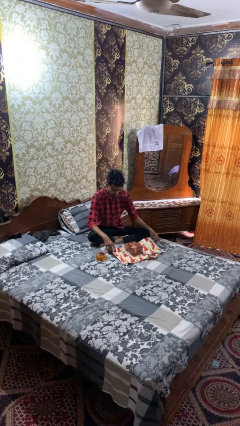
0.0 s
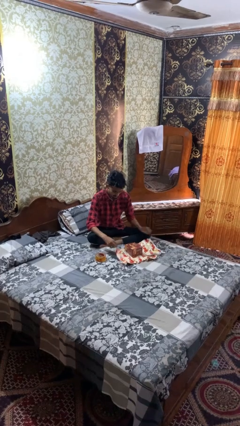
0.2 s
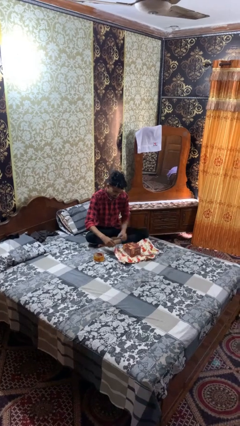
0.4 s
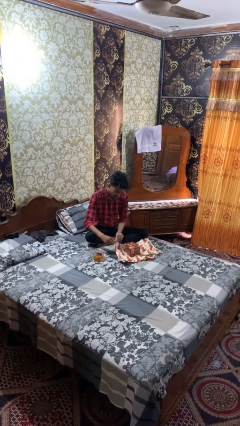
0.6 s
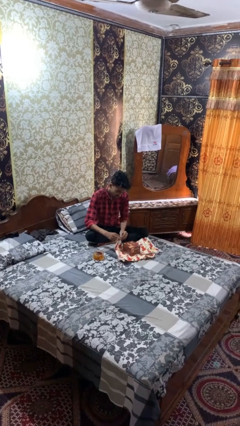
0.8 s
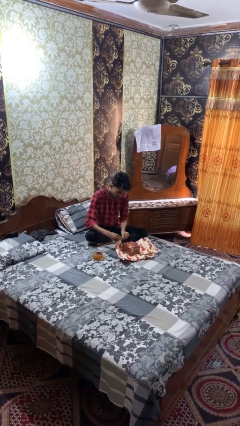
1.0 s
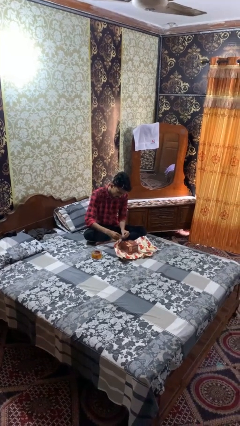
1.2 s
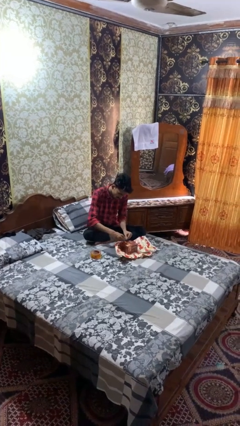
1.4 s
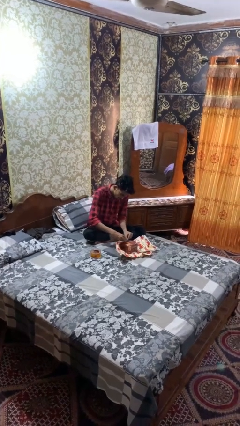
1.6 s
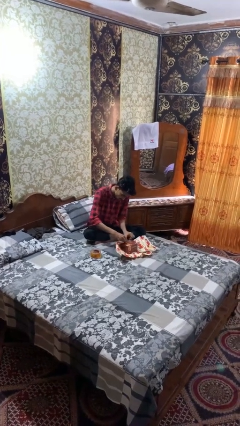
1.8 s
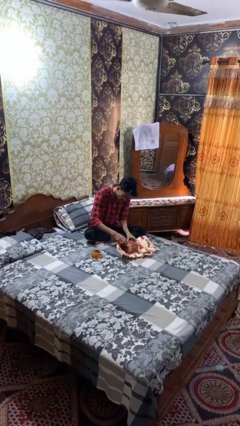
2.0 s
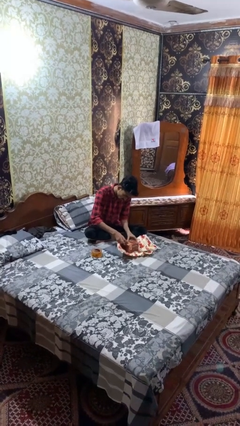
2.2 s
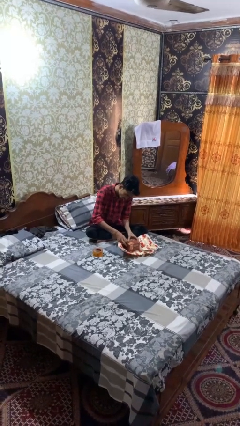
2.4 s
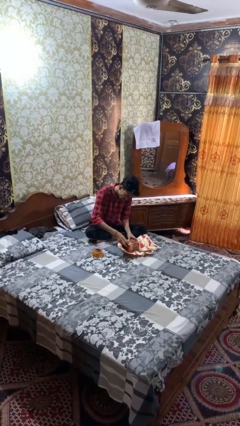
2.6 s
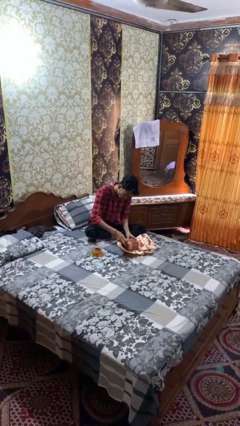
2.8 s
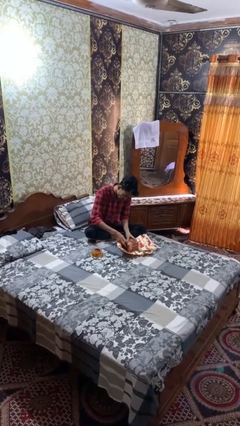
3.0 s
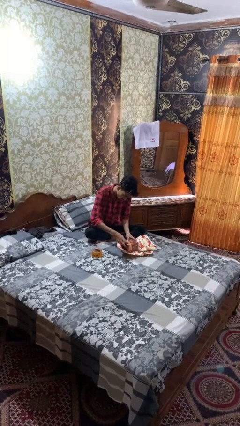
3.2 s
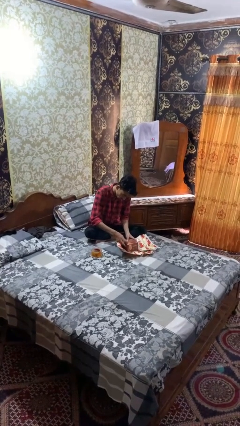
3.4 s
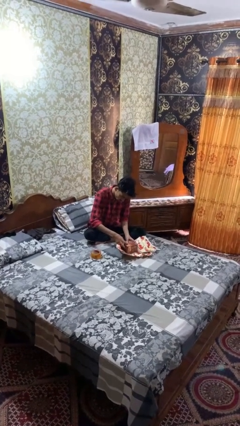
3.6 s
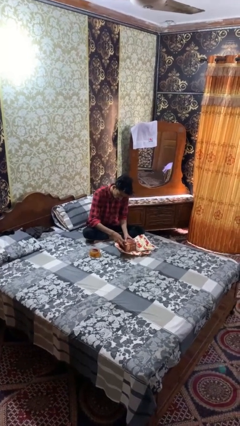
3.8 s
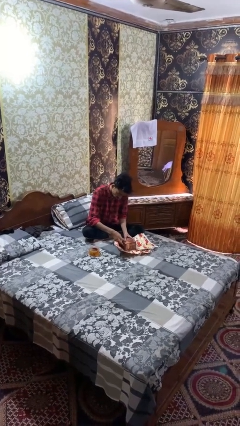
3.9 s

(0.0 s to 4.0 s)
person wraps box

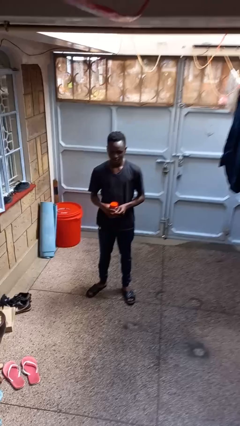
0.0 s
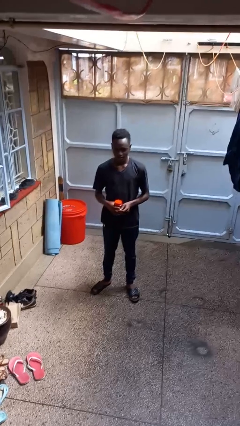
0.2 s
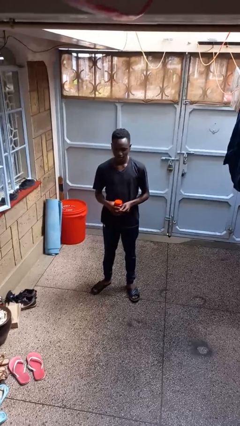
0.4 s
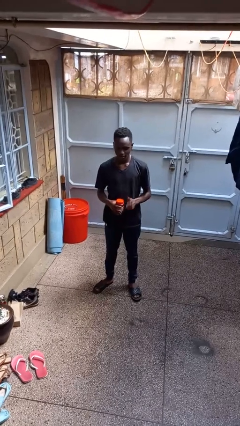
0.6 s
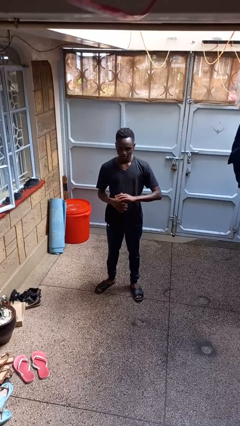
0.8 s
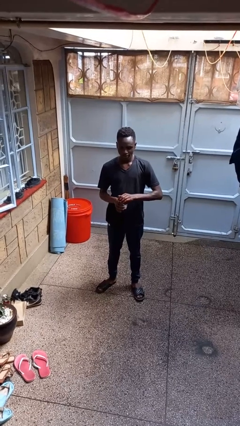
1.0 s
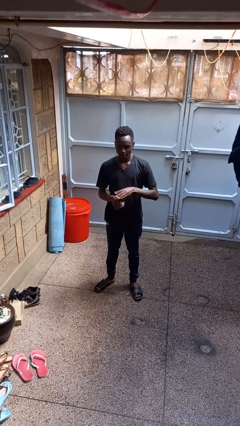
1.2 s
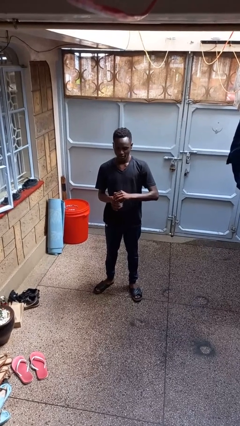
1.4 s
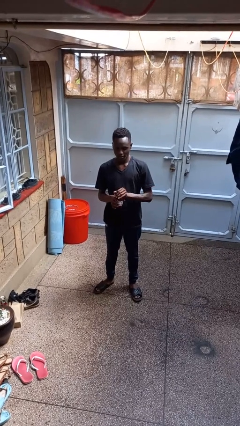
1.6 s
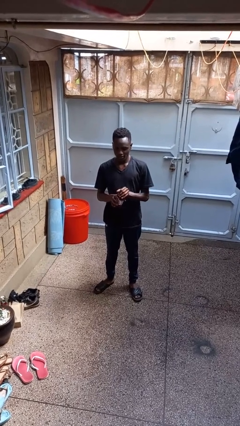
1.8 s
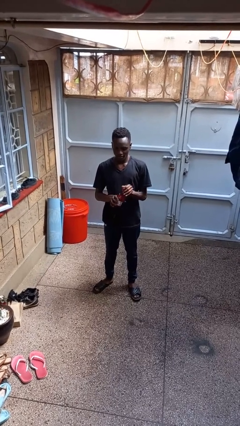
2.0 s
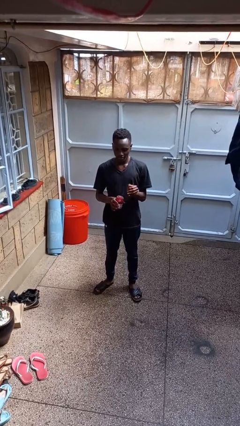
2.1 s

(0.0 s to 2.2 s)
person opens jar

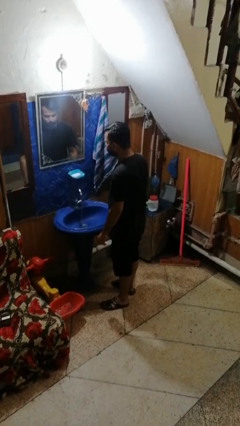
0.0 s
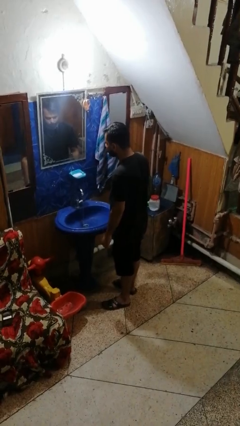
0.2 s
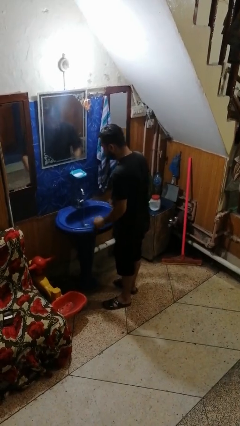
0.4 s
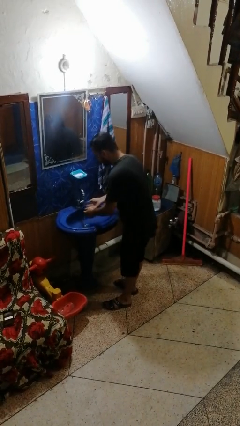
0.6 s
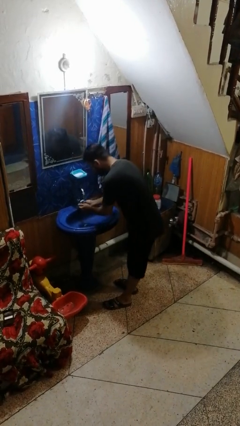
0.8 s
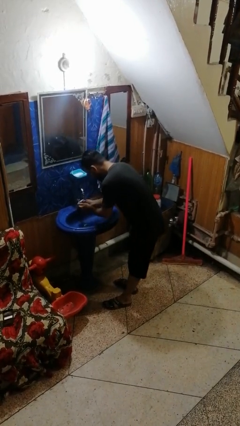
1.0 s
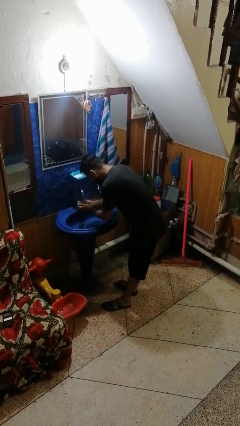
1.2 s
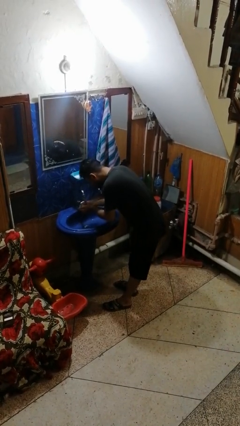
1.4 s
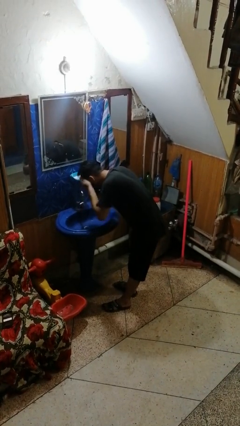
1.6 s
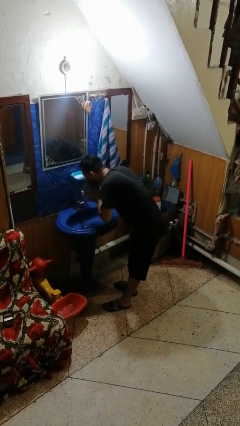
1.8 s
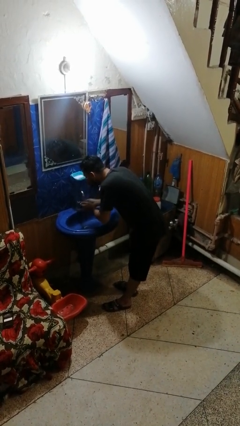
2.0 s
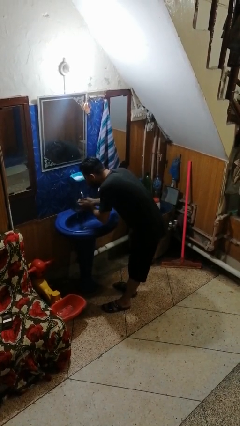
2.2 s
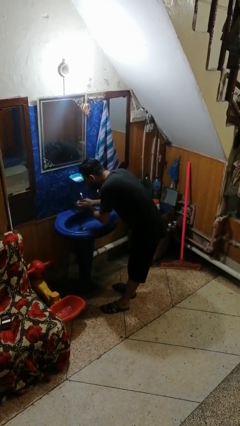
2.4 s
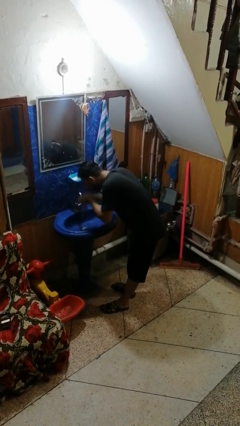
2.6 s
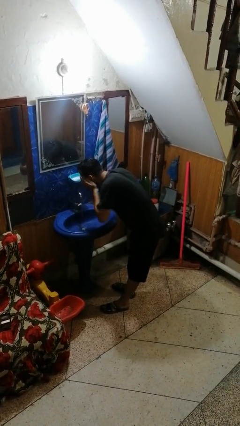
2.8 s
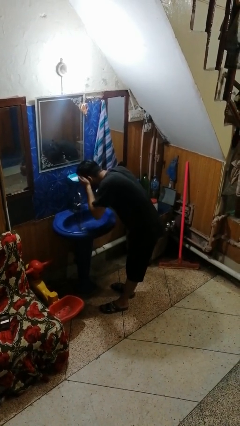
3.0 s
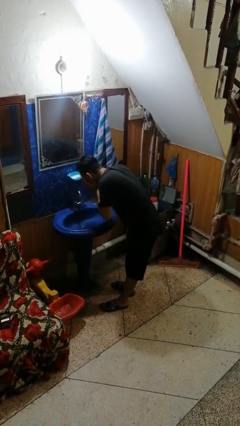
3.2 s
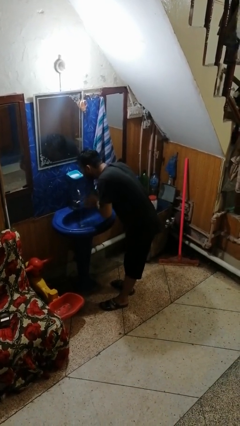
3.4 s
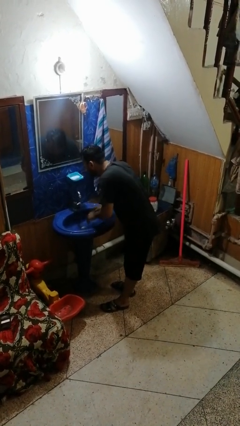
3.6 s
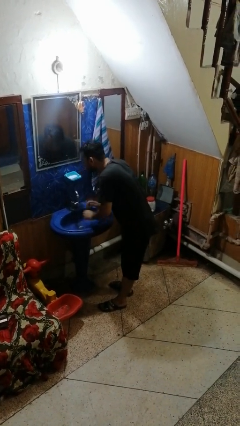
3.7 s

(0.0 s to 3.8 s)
person washes face

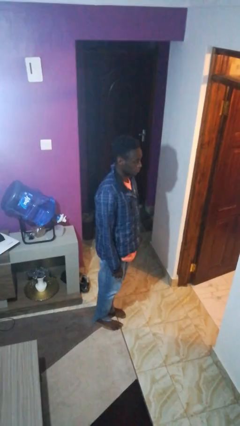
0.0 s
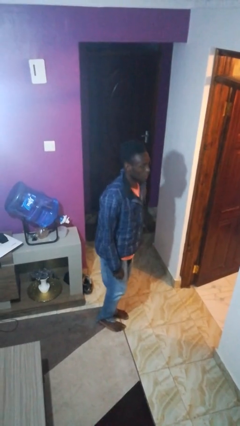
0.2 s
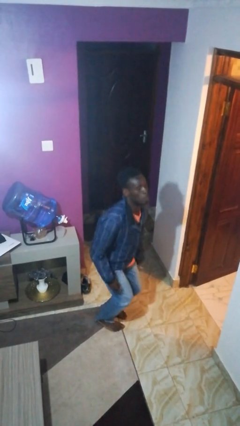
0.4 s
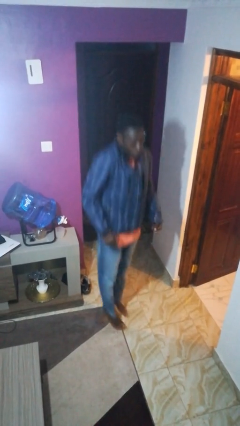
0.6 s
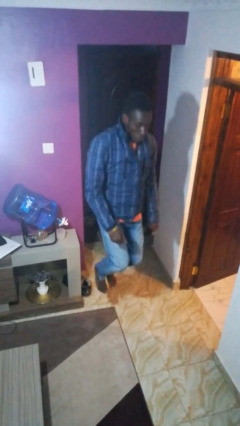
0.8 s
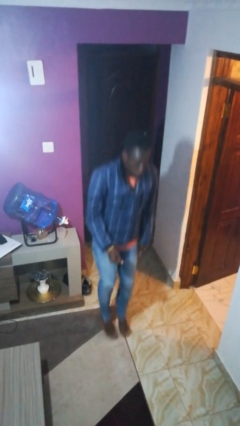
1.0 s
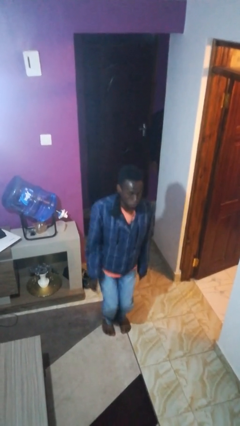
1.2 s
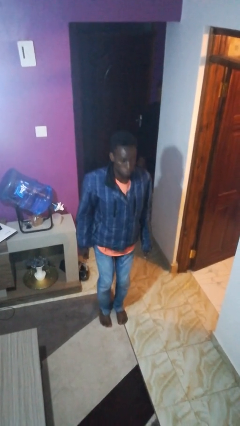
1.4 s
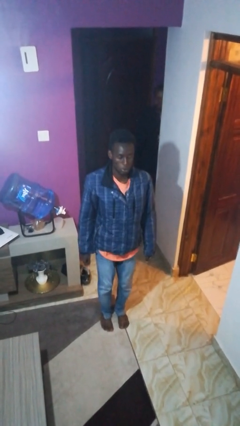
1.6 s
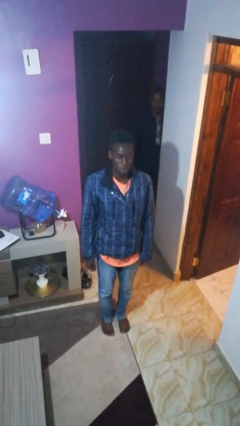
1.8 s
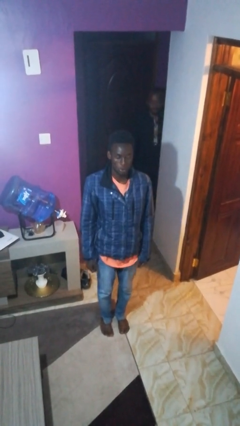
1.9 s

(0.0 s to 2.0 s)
person jumps

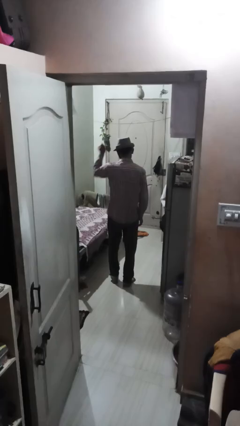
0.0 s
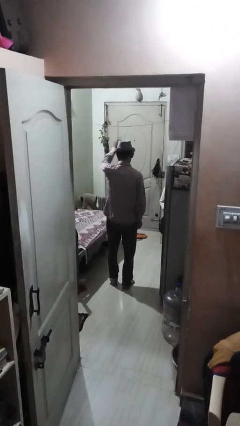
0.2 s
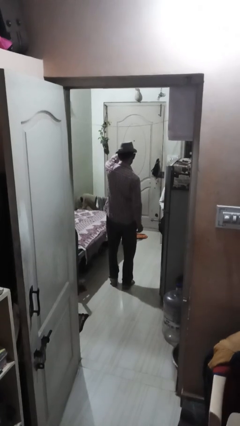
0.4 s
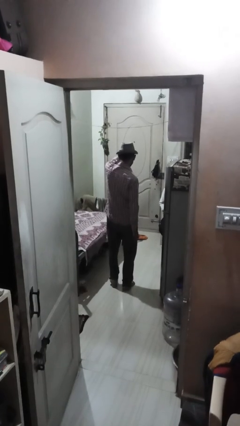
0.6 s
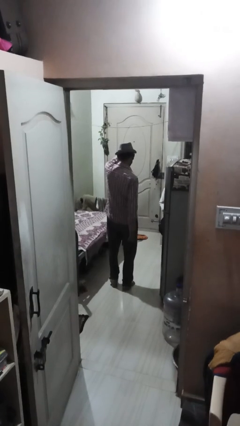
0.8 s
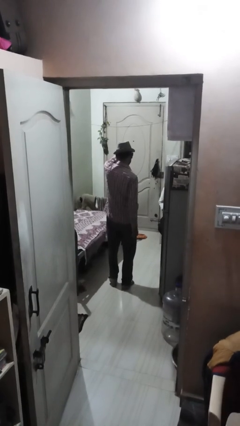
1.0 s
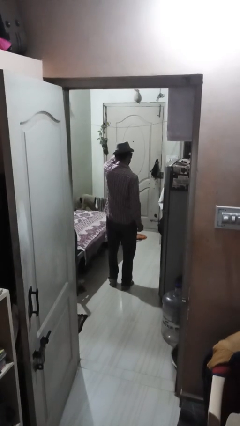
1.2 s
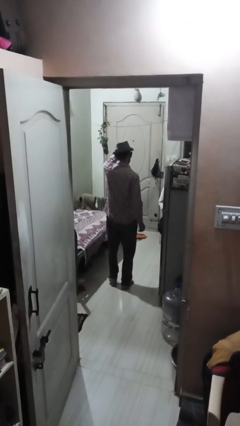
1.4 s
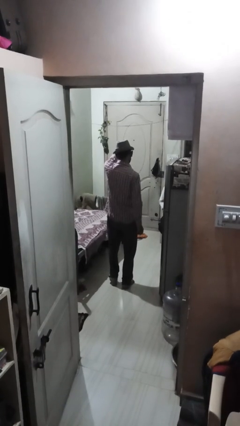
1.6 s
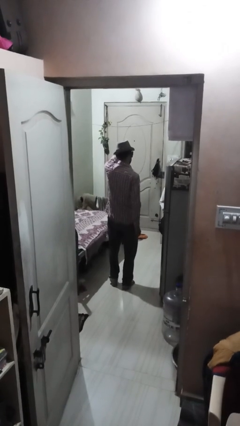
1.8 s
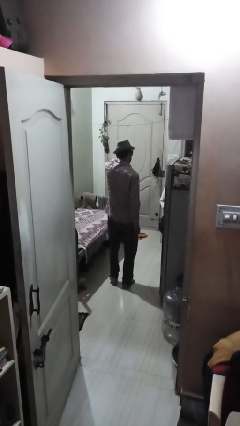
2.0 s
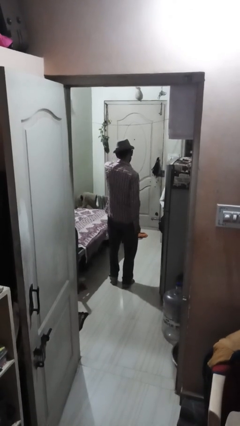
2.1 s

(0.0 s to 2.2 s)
person points at person

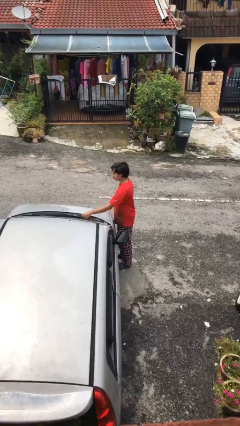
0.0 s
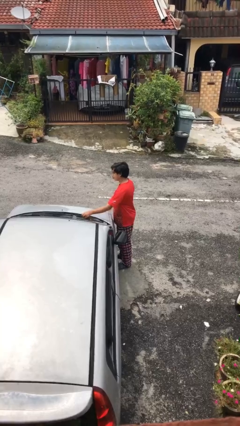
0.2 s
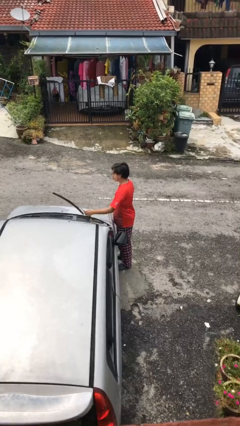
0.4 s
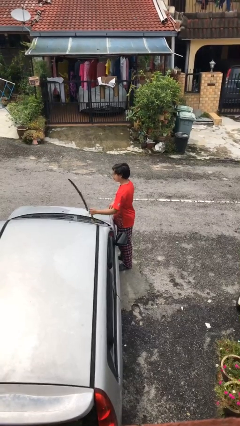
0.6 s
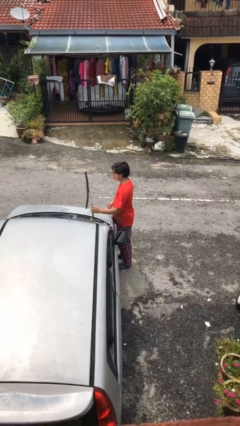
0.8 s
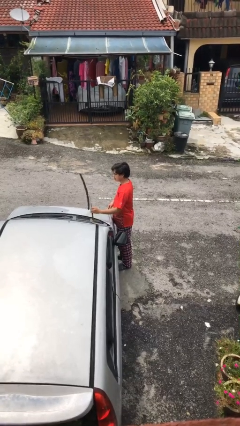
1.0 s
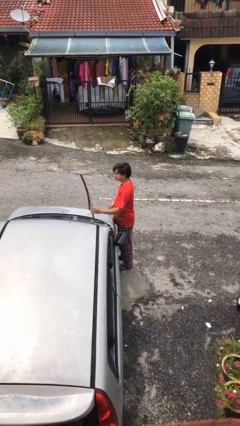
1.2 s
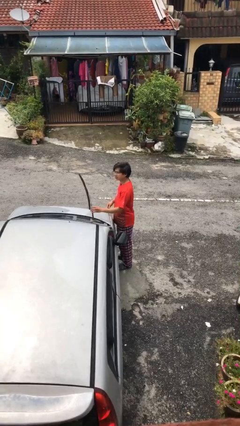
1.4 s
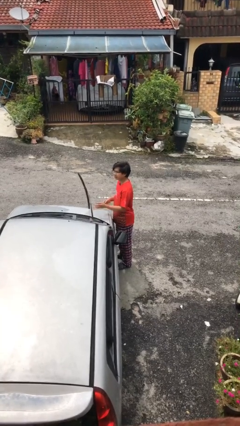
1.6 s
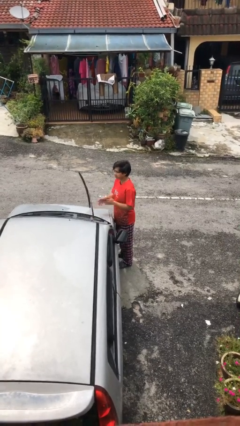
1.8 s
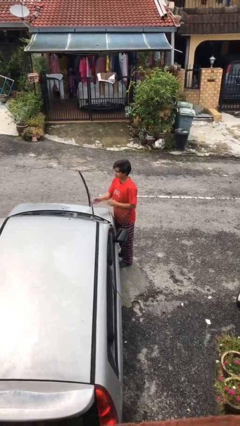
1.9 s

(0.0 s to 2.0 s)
person flips up car wipers

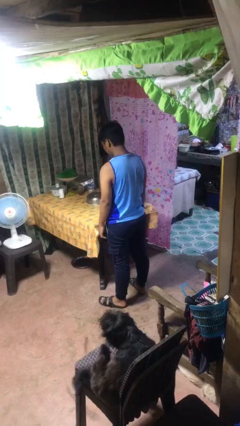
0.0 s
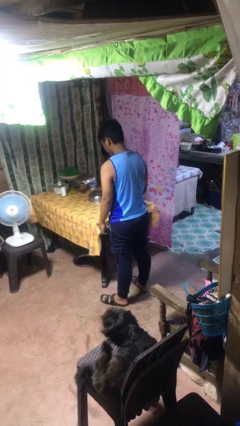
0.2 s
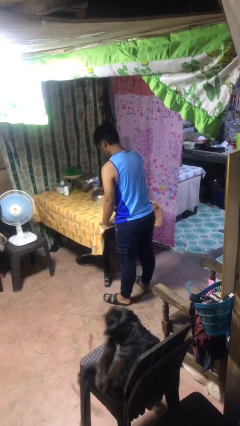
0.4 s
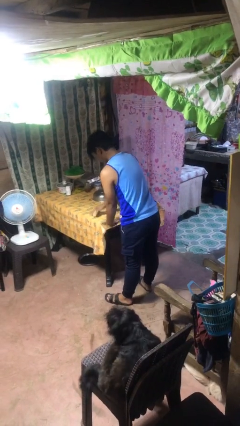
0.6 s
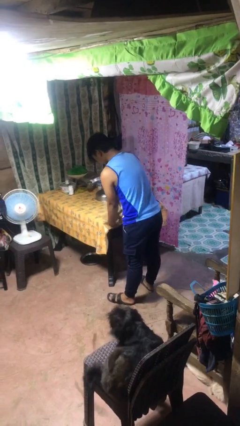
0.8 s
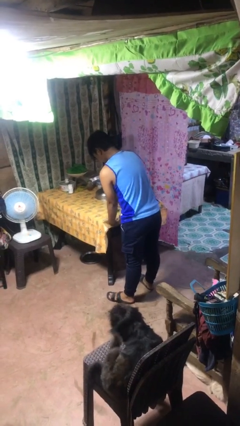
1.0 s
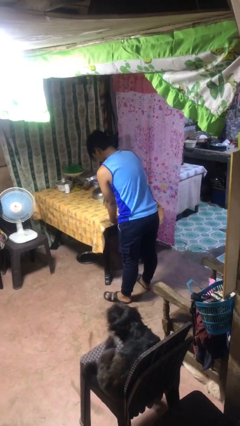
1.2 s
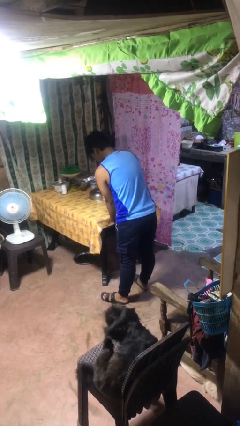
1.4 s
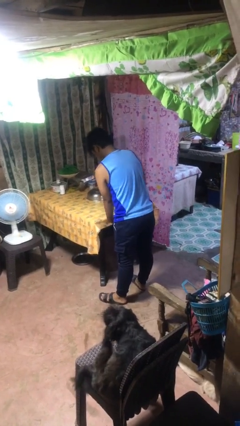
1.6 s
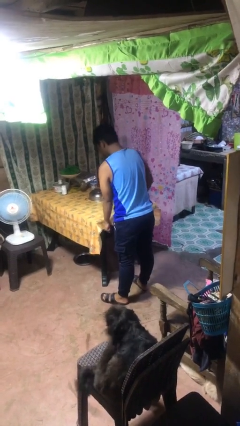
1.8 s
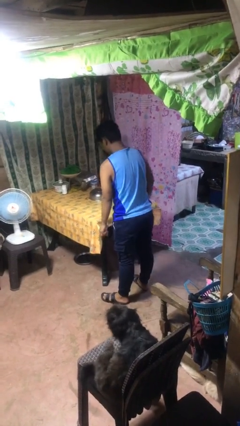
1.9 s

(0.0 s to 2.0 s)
person cleans table with rag
